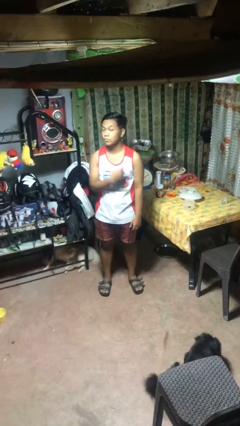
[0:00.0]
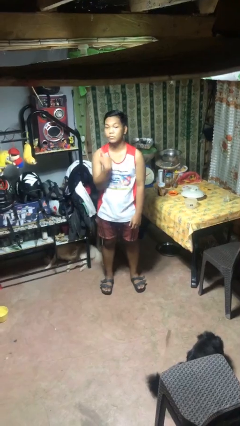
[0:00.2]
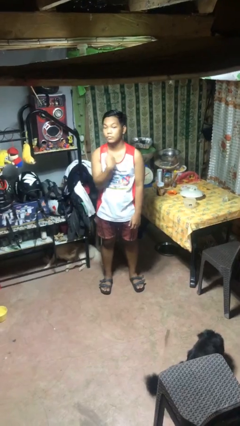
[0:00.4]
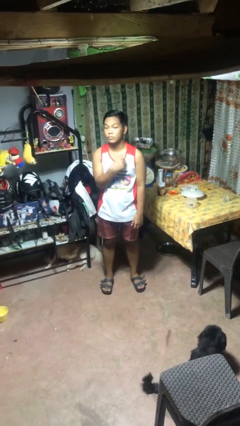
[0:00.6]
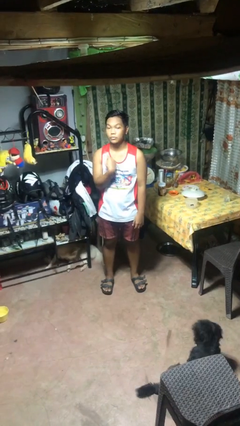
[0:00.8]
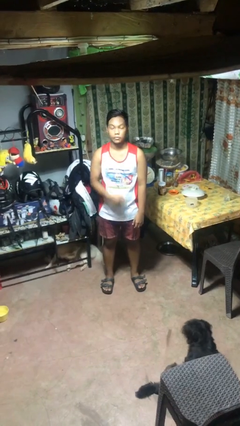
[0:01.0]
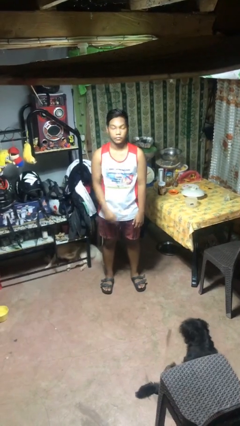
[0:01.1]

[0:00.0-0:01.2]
person gestures cut

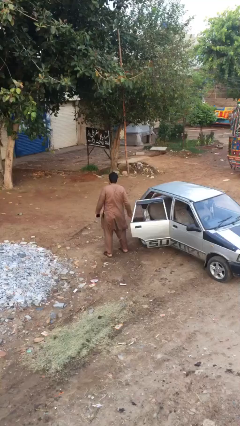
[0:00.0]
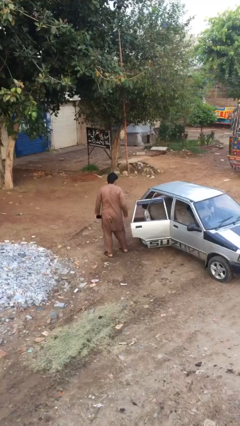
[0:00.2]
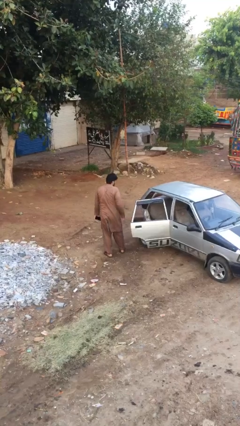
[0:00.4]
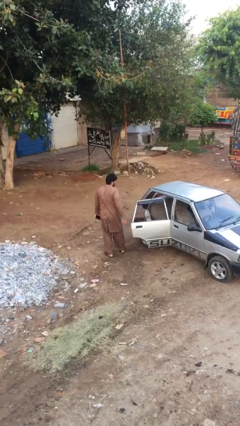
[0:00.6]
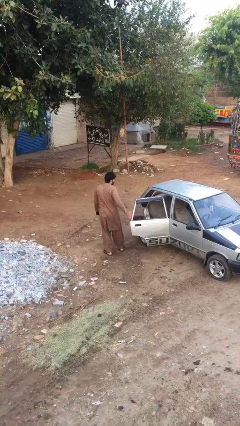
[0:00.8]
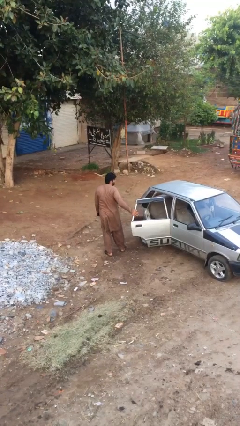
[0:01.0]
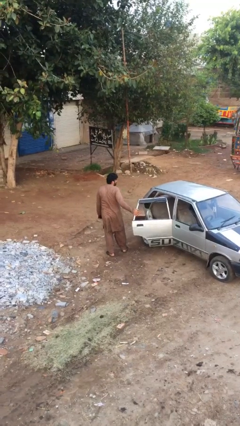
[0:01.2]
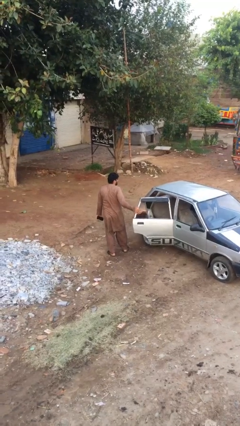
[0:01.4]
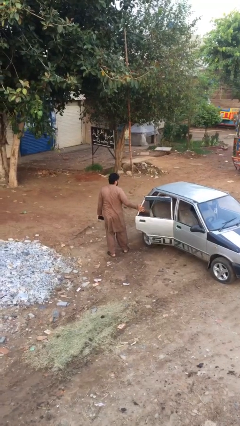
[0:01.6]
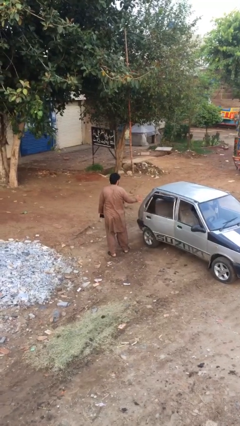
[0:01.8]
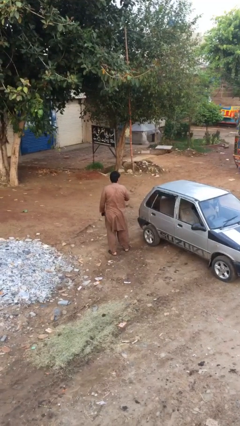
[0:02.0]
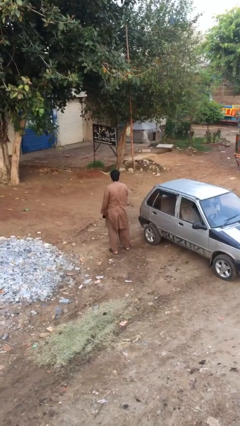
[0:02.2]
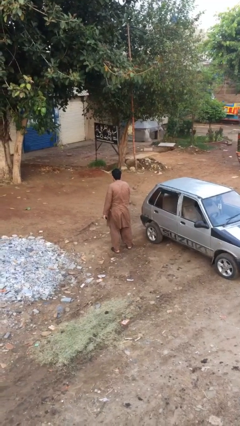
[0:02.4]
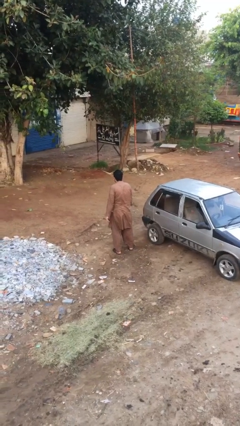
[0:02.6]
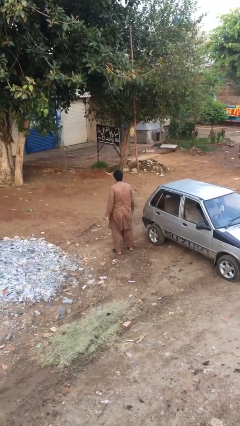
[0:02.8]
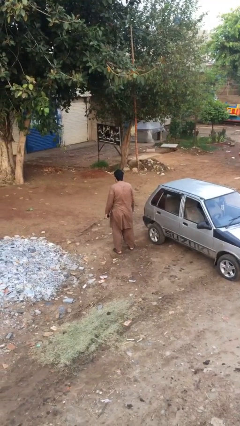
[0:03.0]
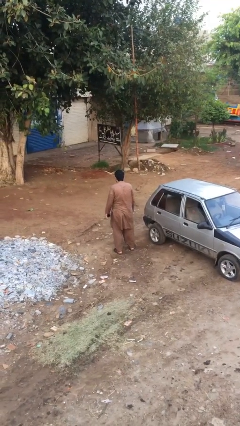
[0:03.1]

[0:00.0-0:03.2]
person closes car door

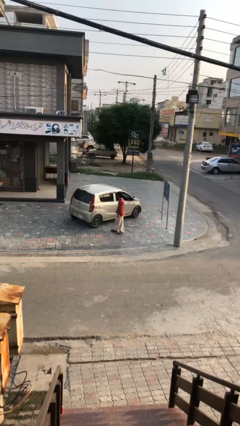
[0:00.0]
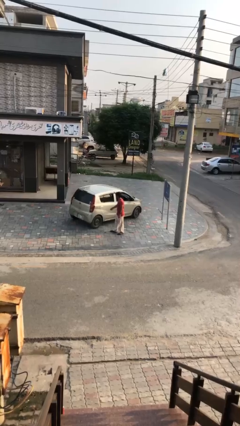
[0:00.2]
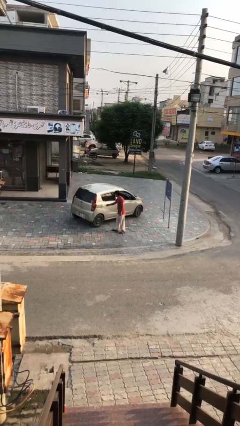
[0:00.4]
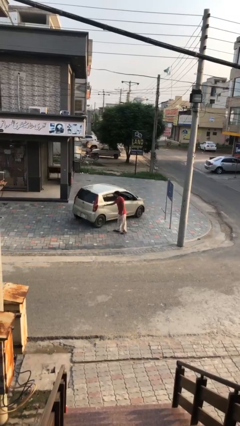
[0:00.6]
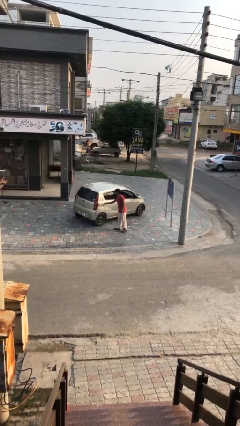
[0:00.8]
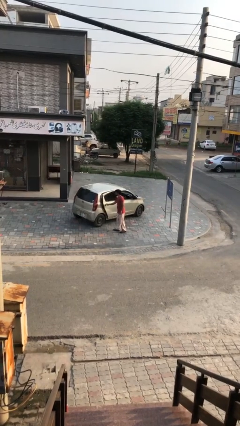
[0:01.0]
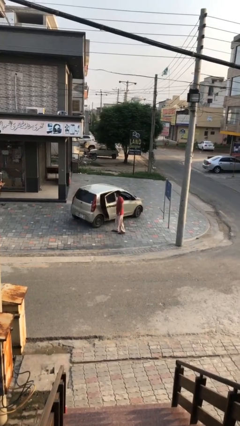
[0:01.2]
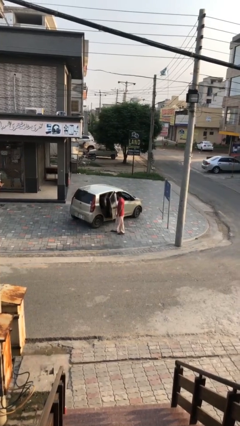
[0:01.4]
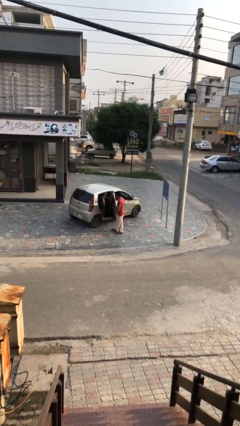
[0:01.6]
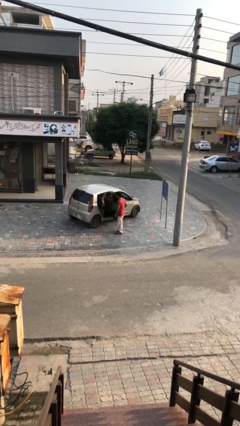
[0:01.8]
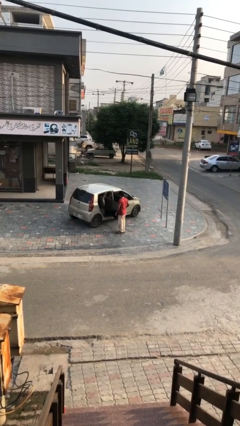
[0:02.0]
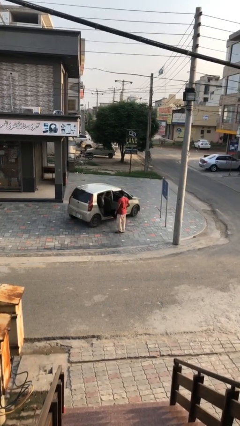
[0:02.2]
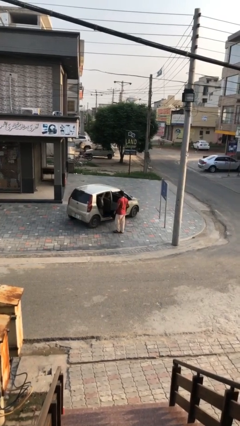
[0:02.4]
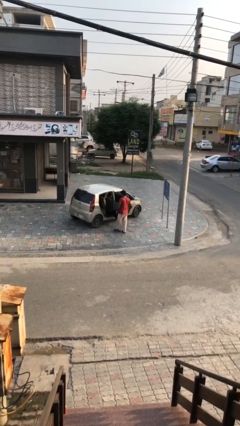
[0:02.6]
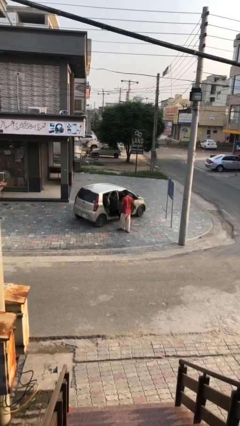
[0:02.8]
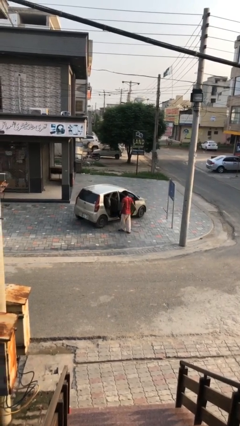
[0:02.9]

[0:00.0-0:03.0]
person opens car door

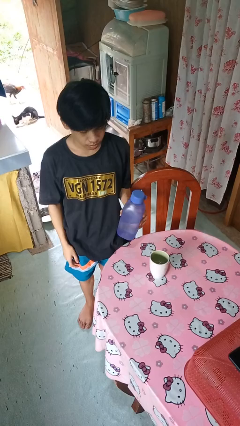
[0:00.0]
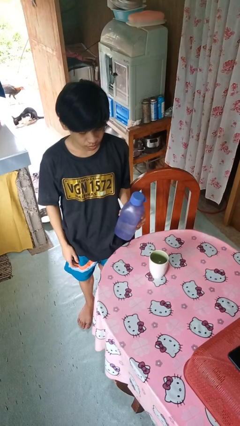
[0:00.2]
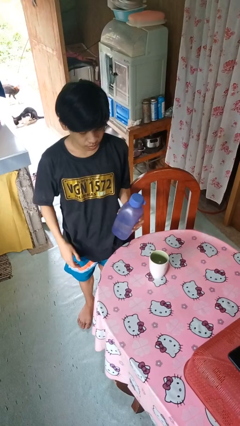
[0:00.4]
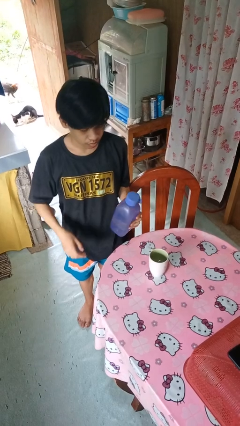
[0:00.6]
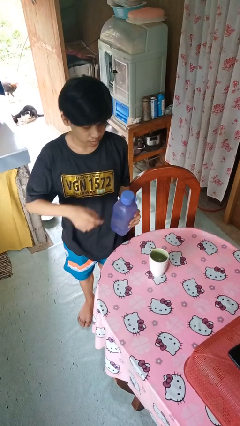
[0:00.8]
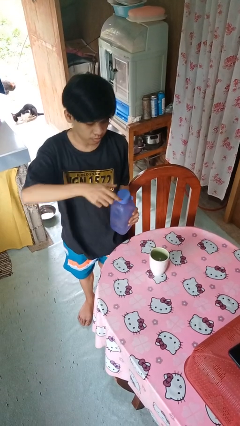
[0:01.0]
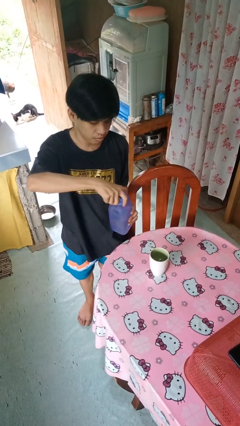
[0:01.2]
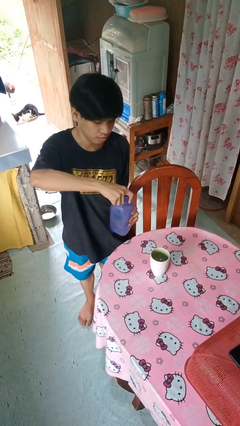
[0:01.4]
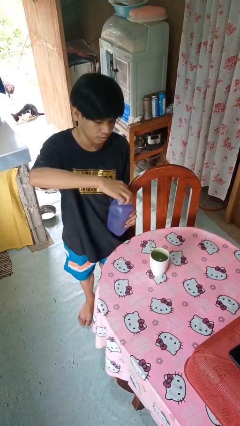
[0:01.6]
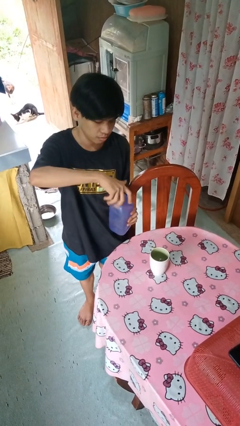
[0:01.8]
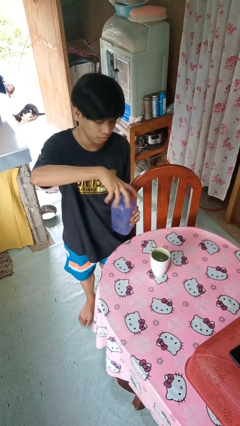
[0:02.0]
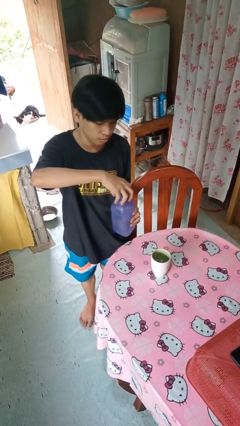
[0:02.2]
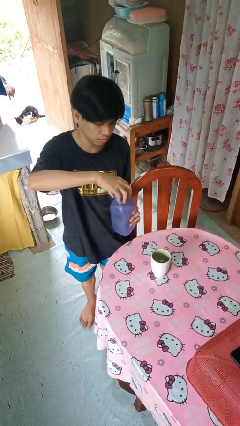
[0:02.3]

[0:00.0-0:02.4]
person unscrews lid from bottle

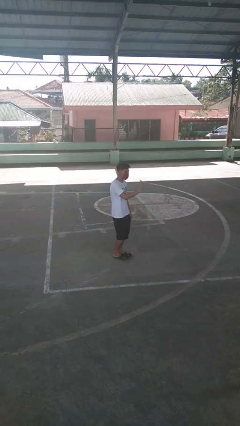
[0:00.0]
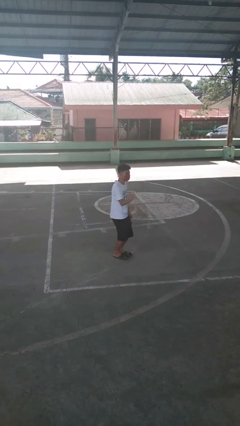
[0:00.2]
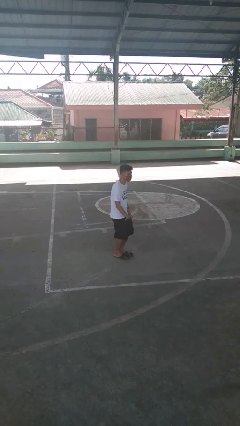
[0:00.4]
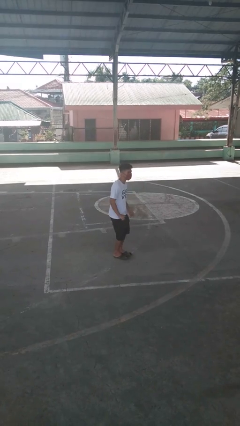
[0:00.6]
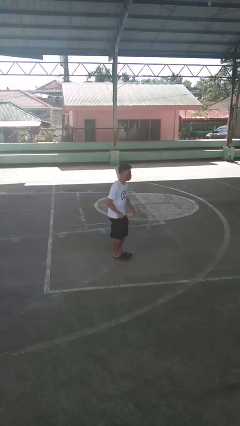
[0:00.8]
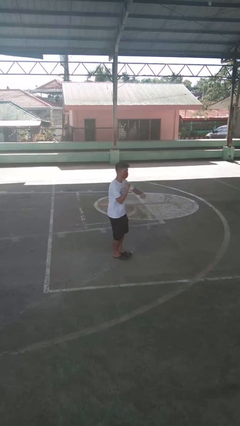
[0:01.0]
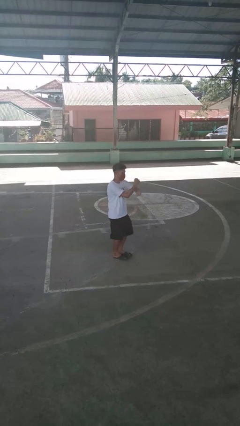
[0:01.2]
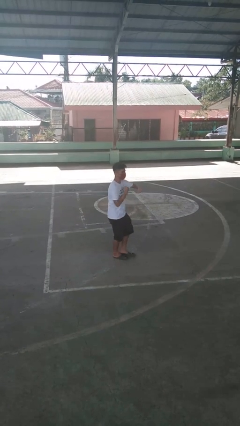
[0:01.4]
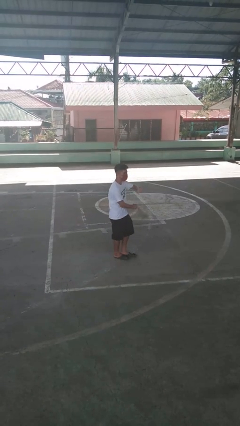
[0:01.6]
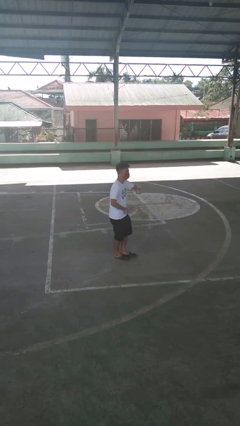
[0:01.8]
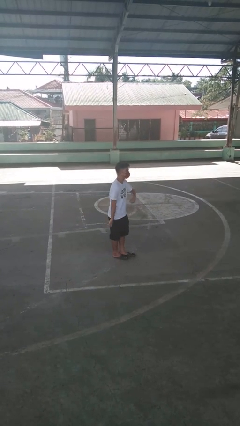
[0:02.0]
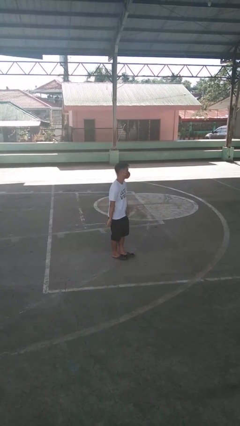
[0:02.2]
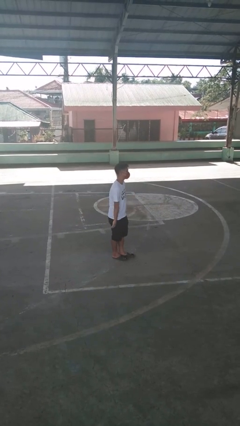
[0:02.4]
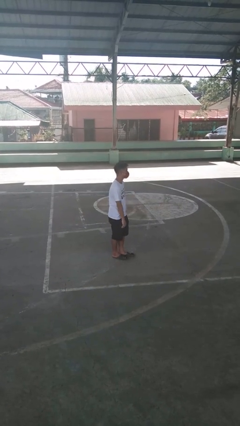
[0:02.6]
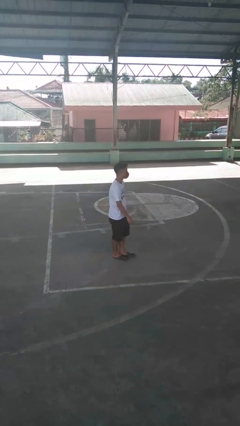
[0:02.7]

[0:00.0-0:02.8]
person dances in place

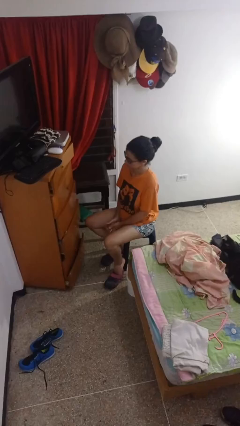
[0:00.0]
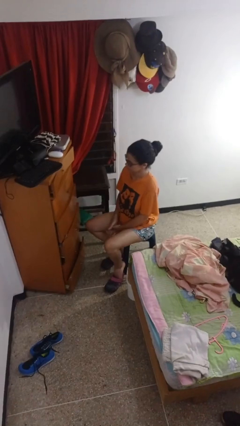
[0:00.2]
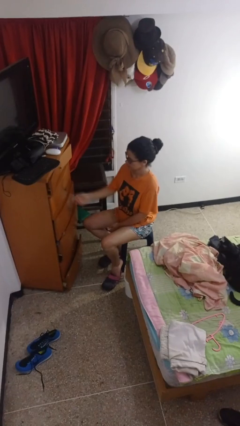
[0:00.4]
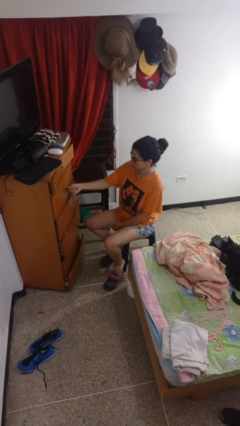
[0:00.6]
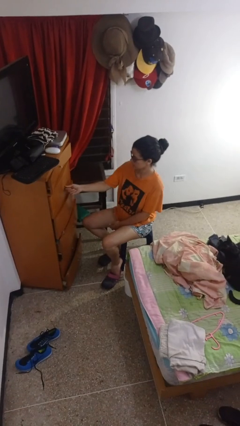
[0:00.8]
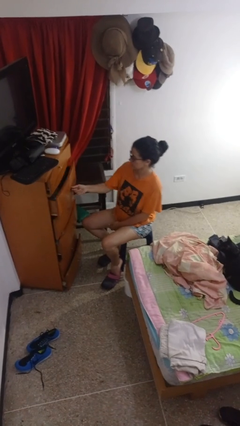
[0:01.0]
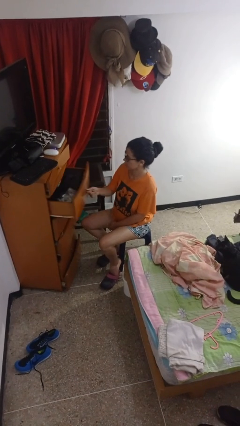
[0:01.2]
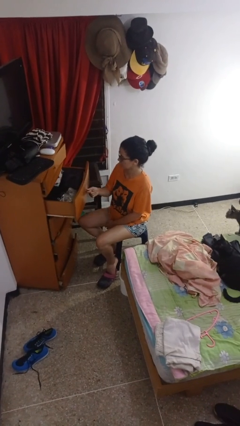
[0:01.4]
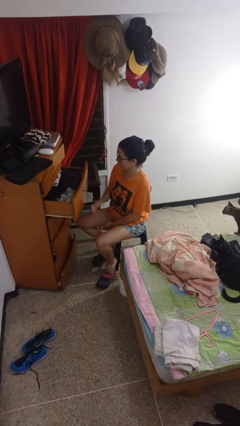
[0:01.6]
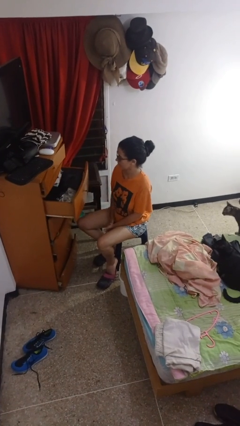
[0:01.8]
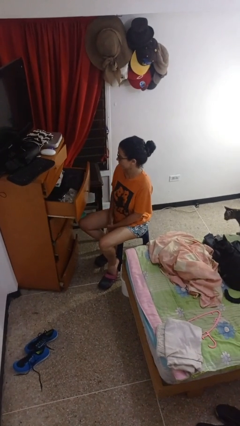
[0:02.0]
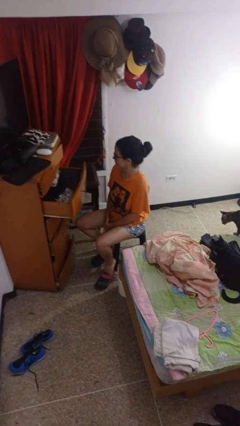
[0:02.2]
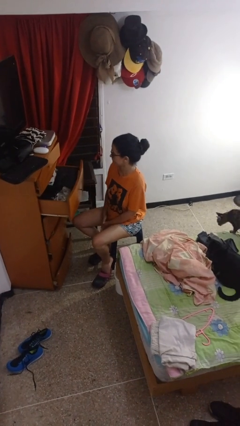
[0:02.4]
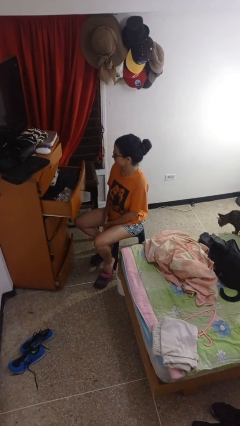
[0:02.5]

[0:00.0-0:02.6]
person opens dresser drawer

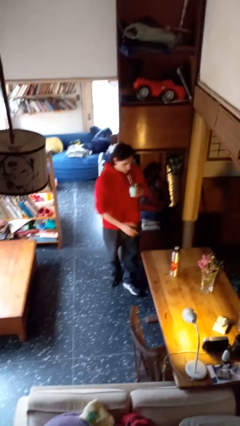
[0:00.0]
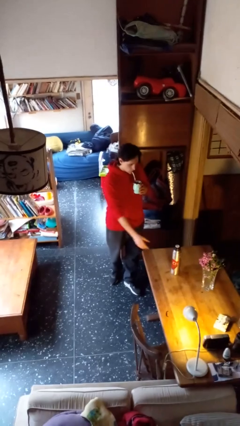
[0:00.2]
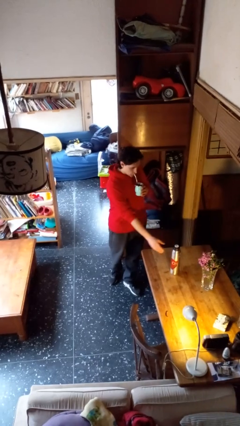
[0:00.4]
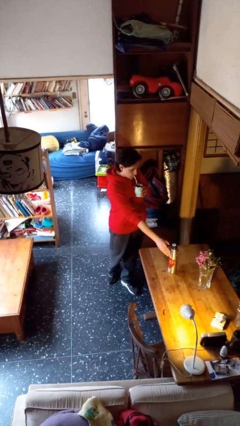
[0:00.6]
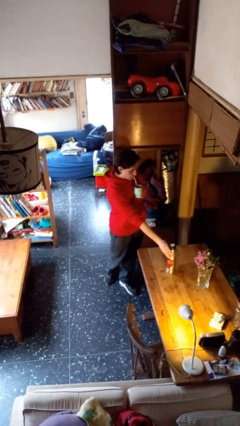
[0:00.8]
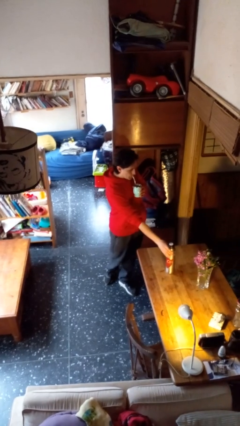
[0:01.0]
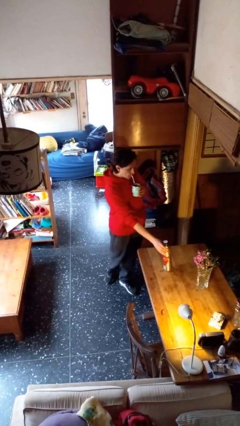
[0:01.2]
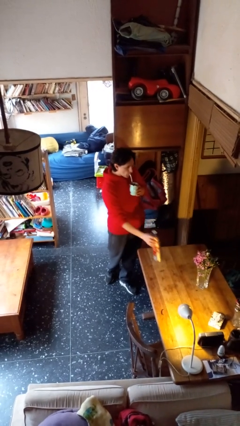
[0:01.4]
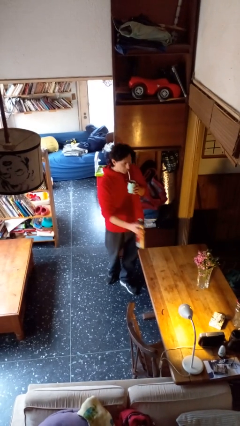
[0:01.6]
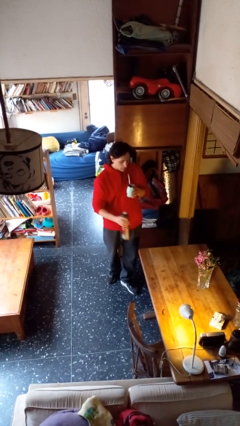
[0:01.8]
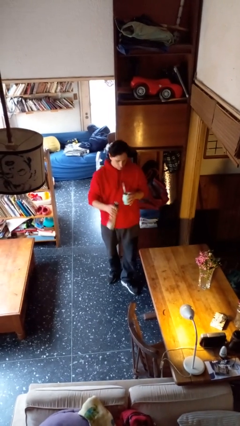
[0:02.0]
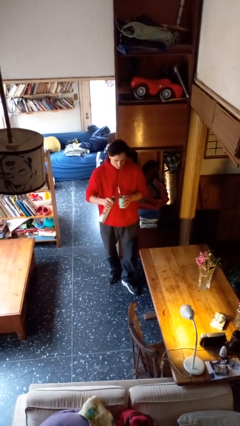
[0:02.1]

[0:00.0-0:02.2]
person drinks from straw
